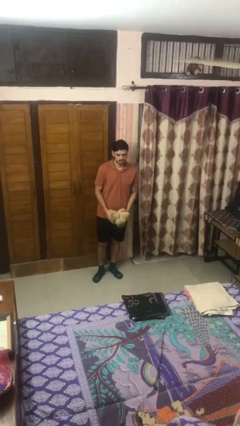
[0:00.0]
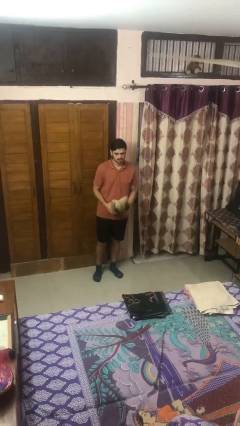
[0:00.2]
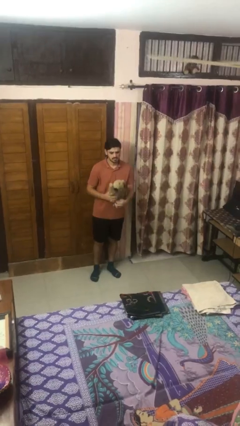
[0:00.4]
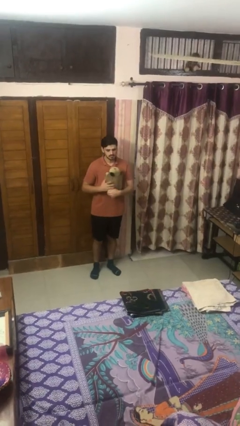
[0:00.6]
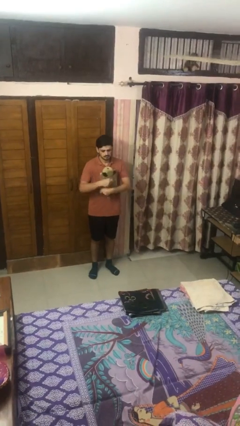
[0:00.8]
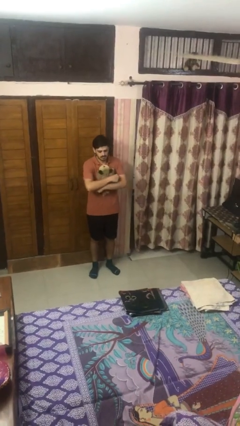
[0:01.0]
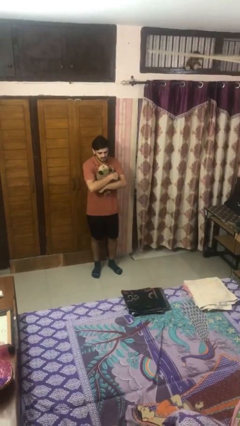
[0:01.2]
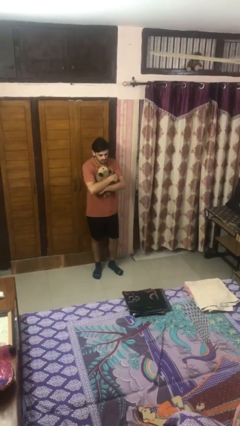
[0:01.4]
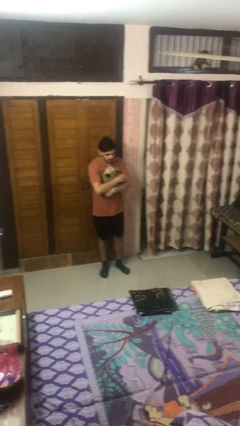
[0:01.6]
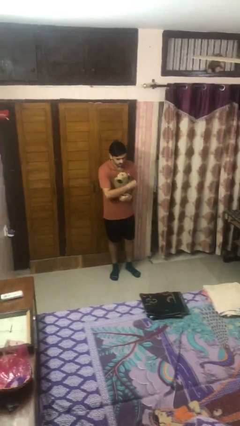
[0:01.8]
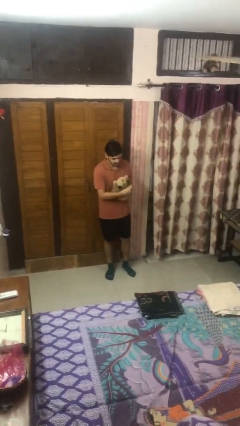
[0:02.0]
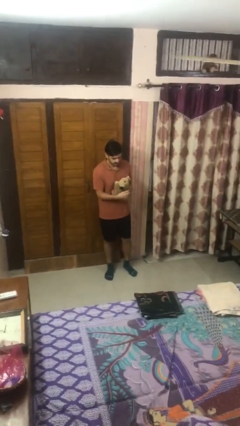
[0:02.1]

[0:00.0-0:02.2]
person hugs stuffed animal

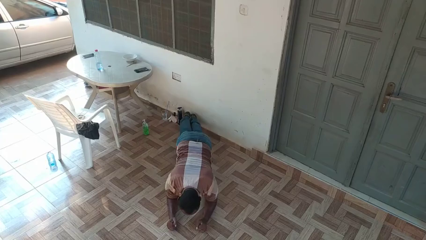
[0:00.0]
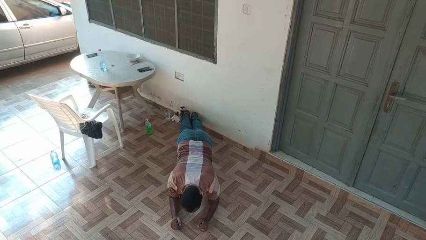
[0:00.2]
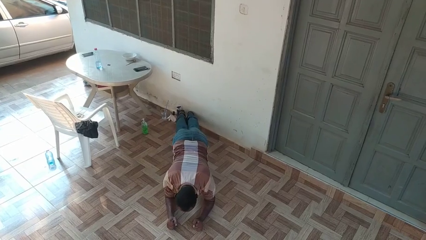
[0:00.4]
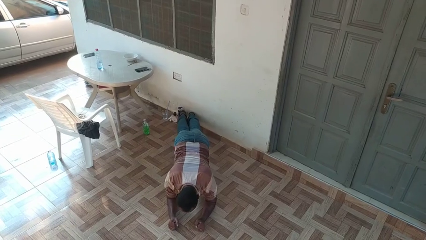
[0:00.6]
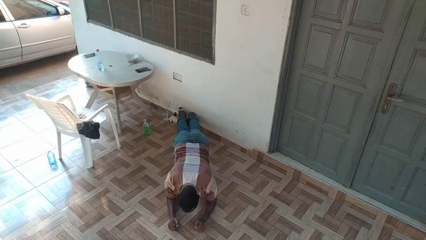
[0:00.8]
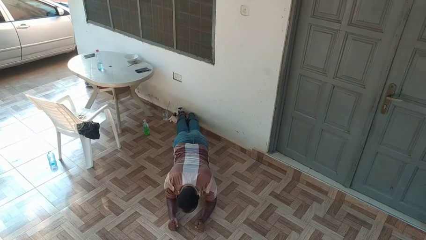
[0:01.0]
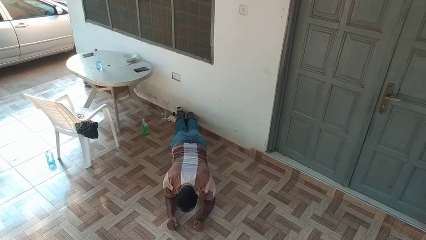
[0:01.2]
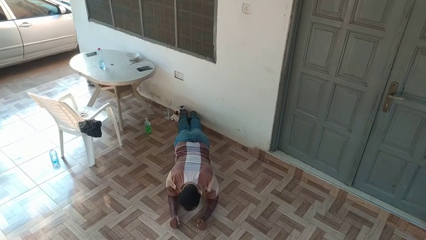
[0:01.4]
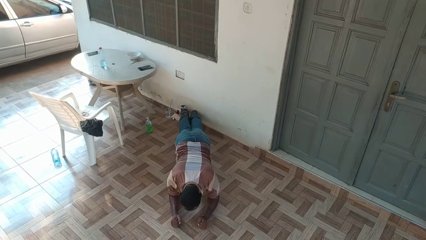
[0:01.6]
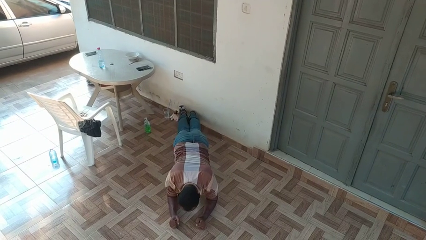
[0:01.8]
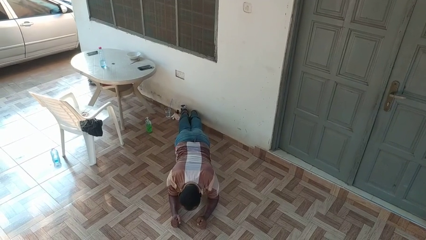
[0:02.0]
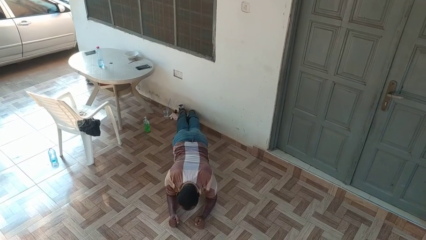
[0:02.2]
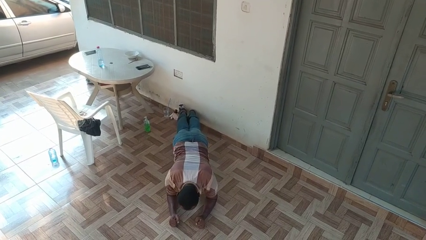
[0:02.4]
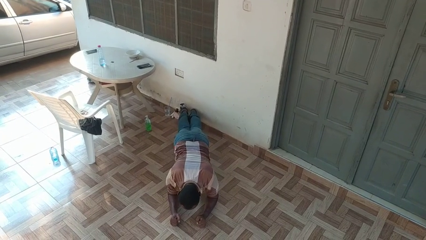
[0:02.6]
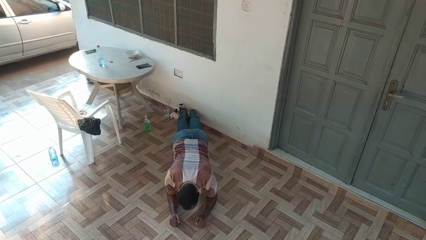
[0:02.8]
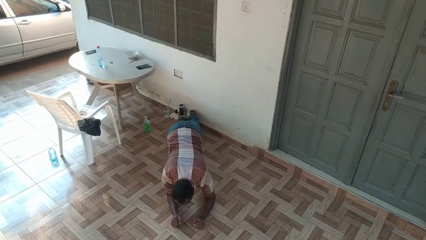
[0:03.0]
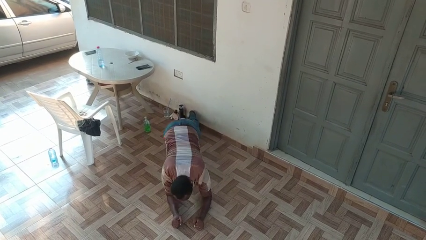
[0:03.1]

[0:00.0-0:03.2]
person exercises with plank

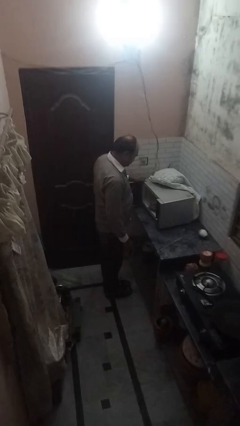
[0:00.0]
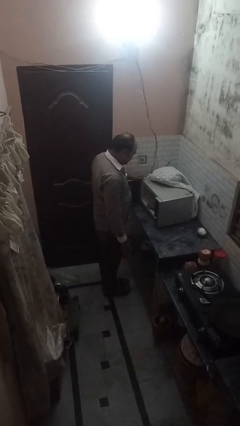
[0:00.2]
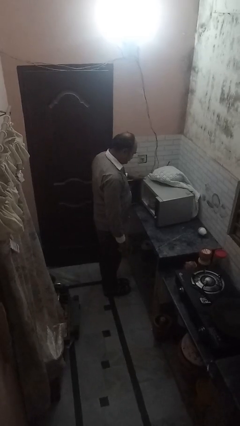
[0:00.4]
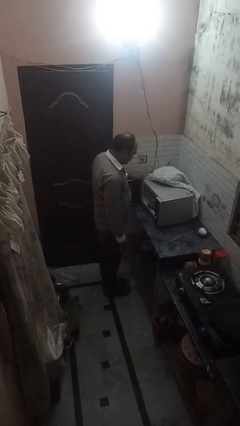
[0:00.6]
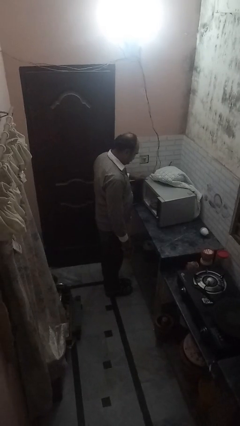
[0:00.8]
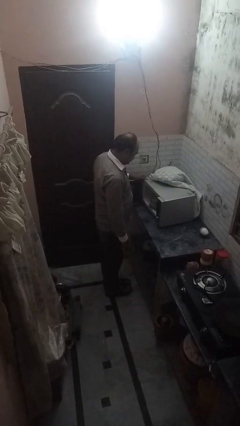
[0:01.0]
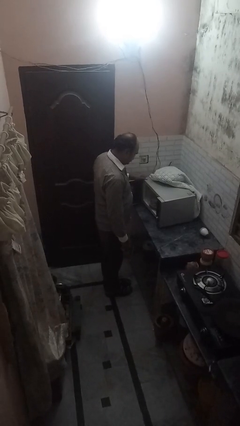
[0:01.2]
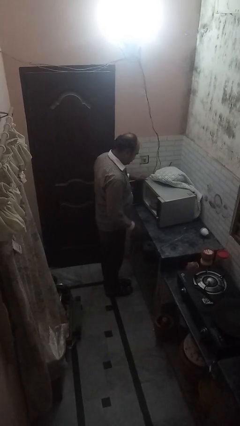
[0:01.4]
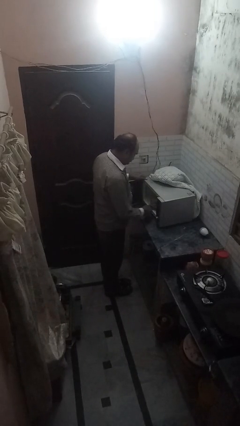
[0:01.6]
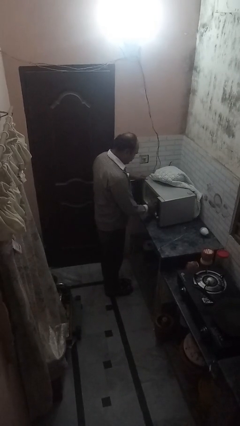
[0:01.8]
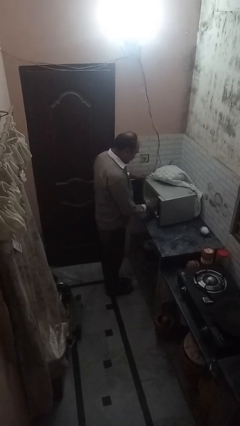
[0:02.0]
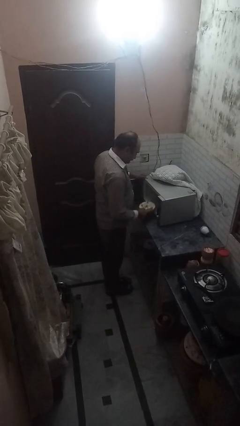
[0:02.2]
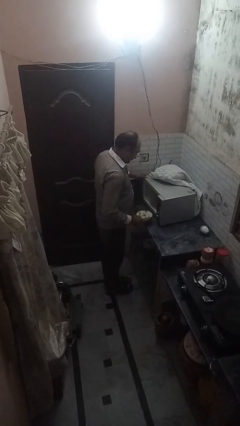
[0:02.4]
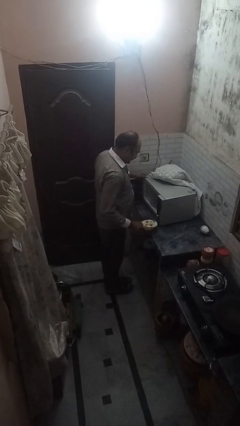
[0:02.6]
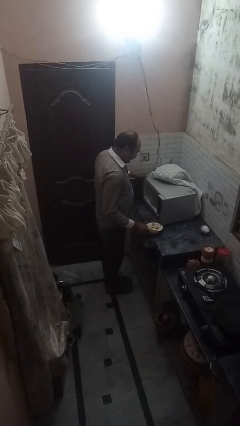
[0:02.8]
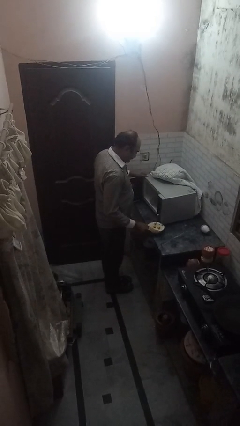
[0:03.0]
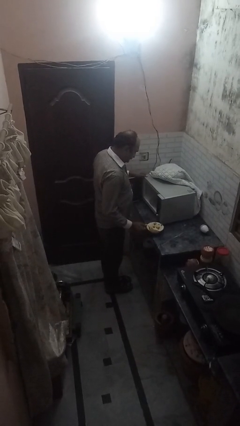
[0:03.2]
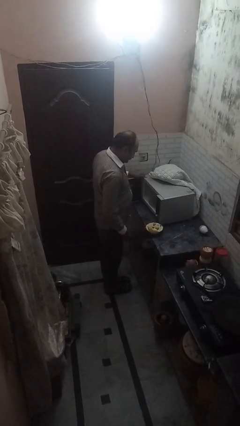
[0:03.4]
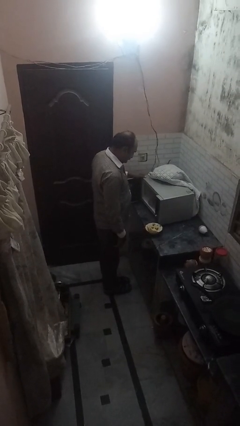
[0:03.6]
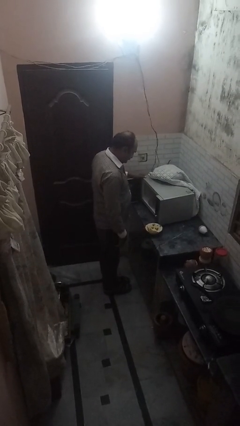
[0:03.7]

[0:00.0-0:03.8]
person takes object from microwave

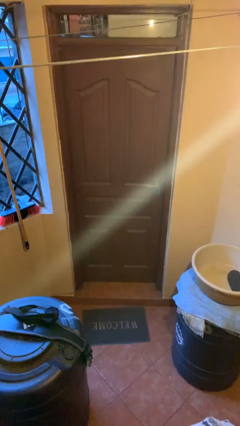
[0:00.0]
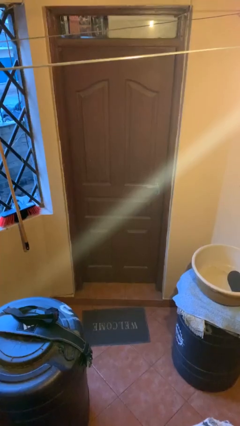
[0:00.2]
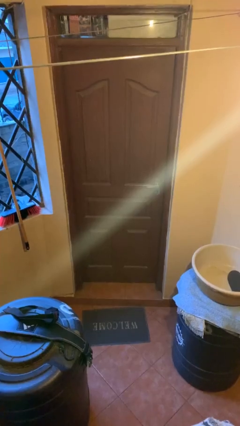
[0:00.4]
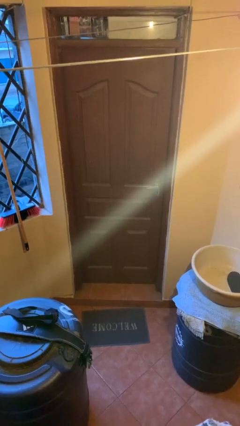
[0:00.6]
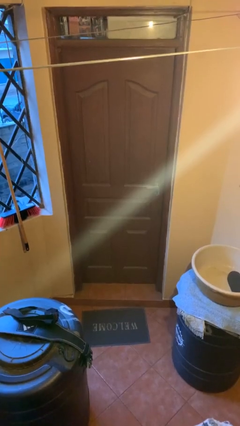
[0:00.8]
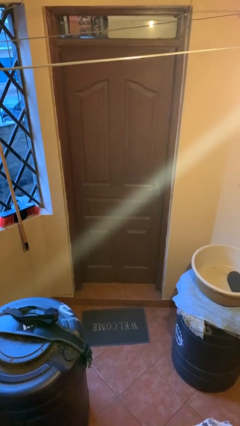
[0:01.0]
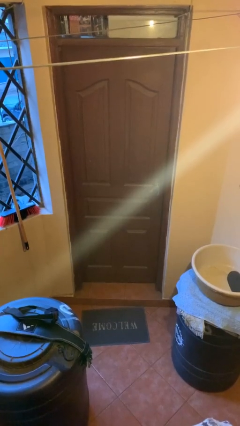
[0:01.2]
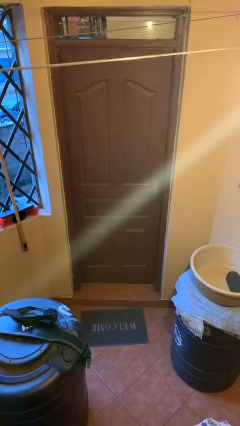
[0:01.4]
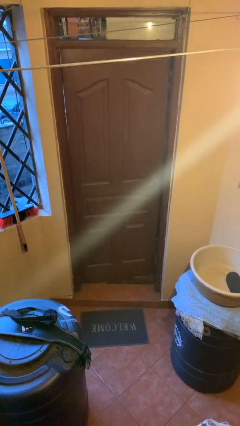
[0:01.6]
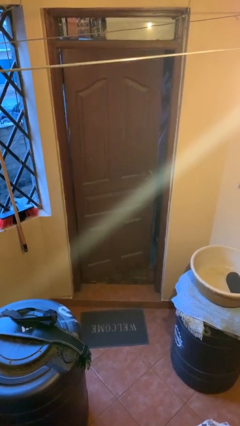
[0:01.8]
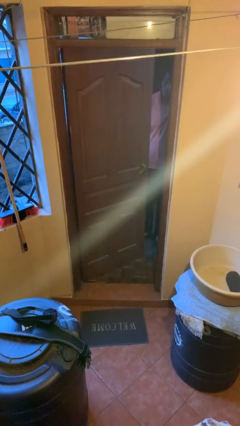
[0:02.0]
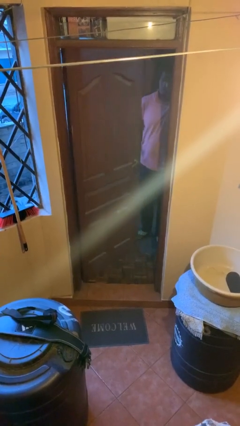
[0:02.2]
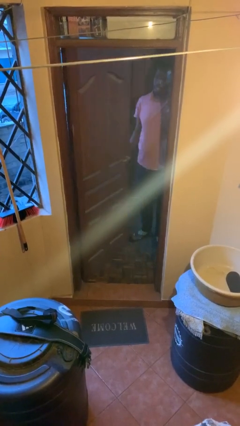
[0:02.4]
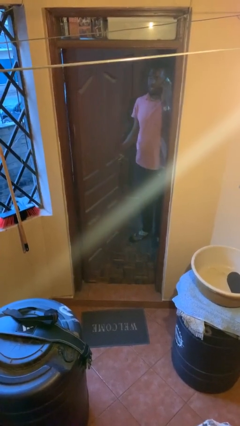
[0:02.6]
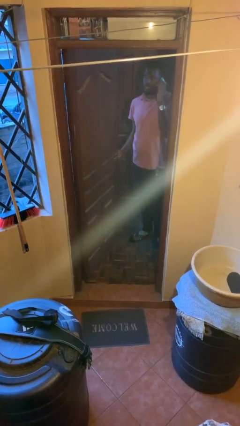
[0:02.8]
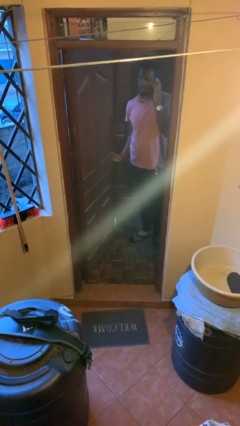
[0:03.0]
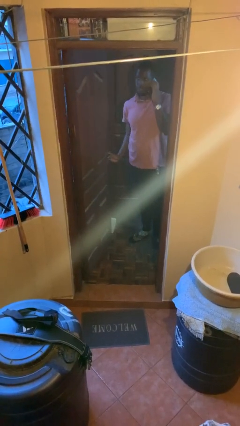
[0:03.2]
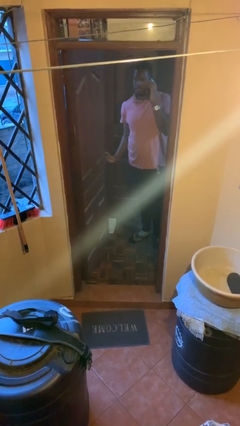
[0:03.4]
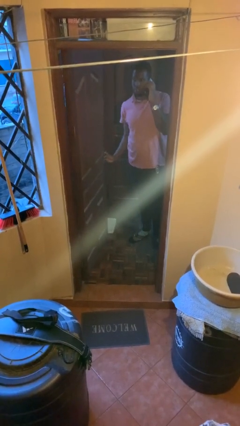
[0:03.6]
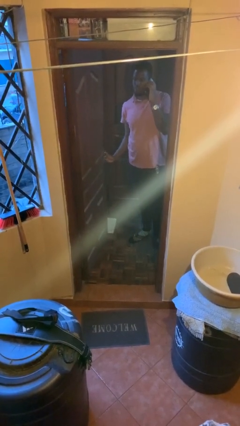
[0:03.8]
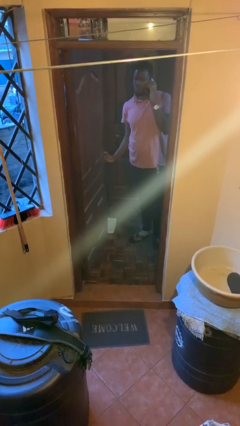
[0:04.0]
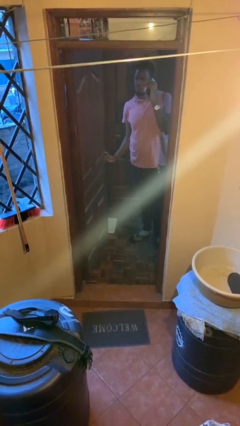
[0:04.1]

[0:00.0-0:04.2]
person opens facility door

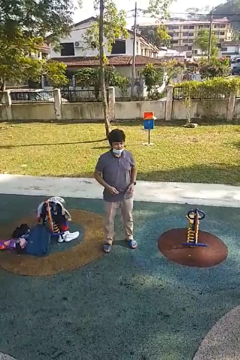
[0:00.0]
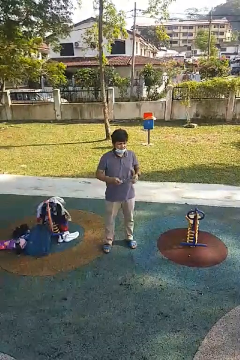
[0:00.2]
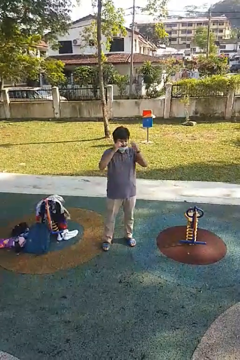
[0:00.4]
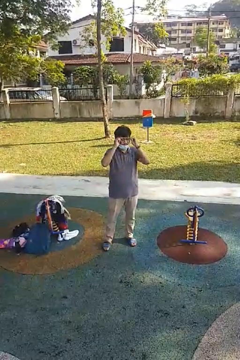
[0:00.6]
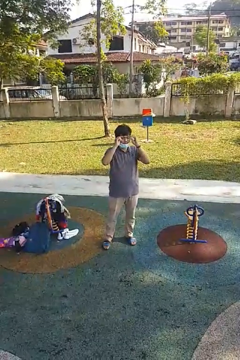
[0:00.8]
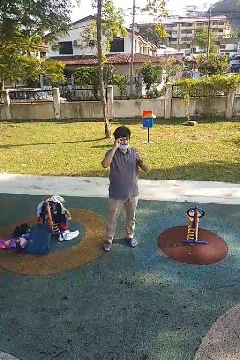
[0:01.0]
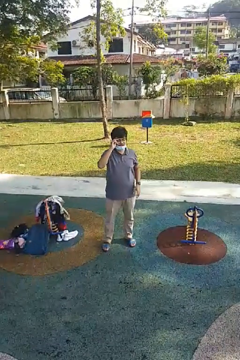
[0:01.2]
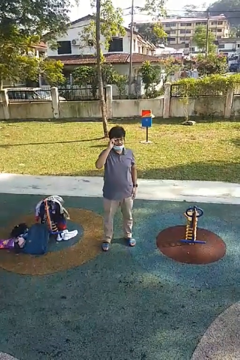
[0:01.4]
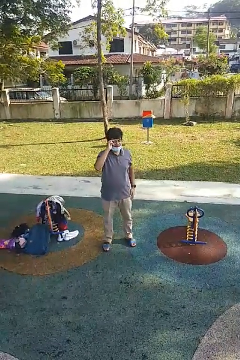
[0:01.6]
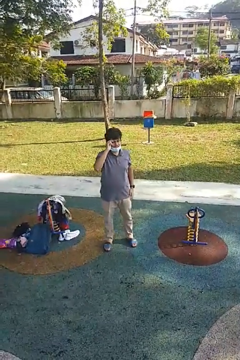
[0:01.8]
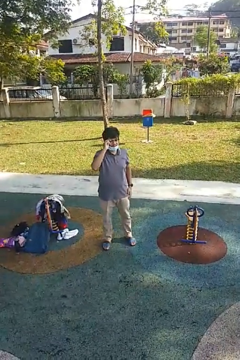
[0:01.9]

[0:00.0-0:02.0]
person puts on glasses

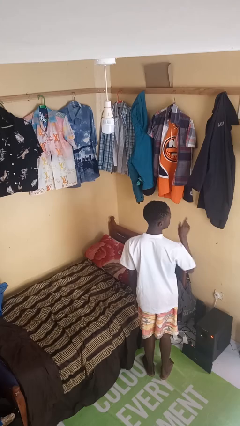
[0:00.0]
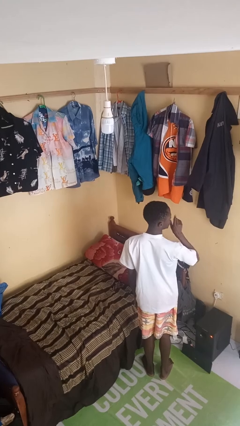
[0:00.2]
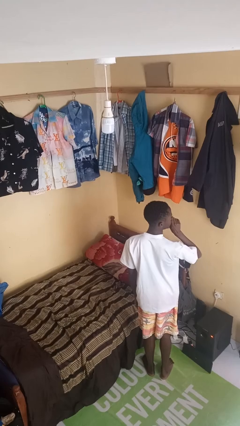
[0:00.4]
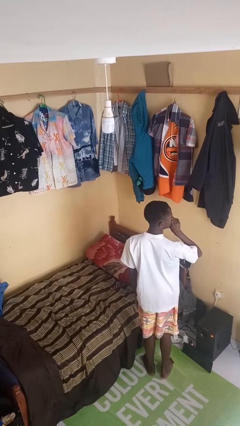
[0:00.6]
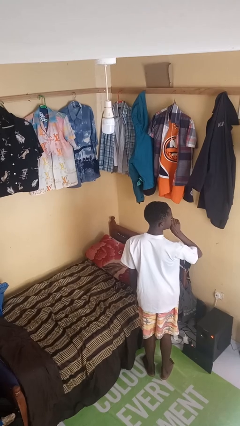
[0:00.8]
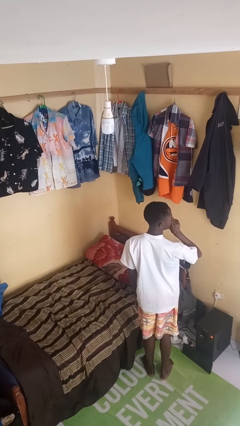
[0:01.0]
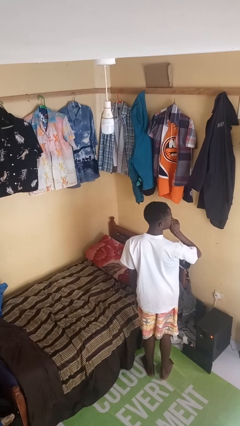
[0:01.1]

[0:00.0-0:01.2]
person gestures be quiet

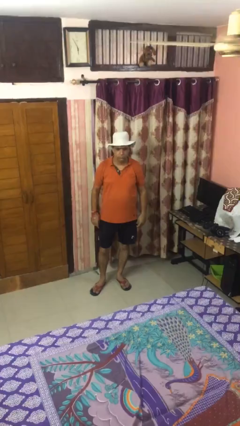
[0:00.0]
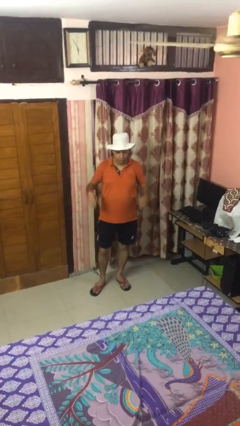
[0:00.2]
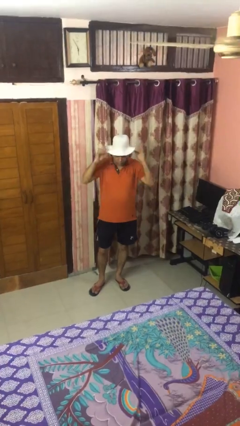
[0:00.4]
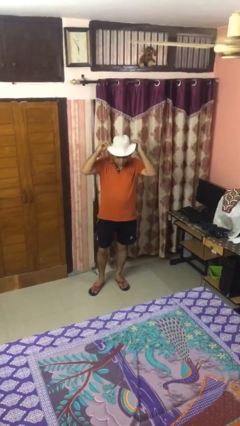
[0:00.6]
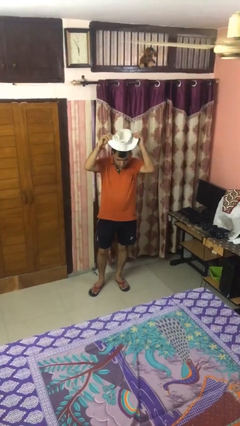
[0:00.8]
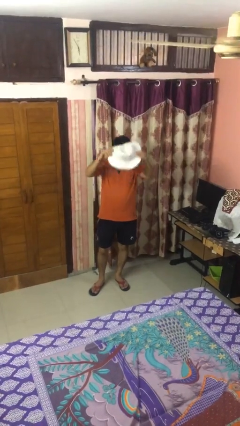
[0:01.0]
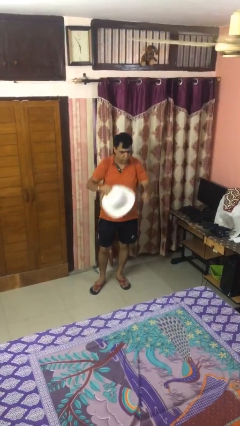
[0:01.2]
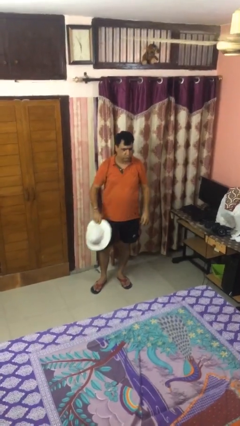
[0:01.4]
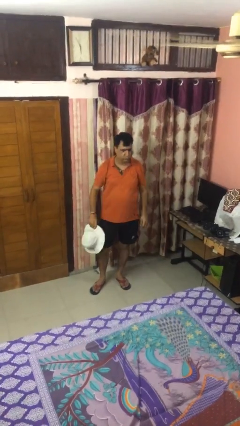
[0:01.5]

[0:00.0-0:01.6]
person takes off hat
